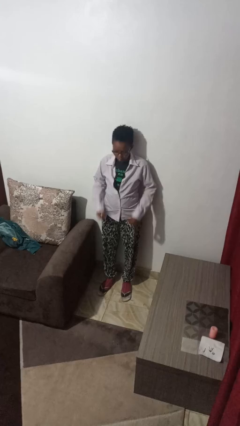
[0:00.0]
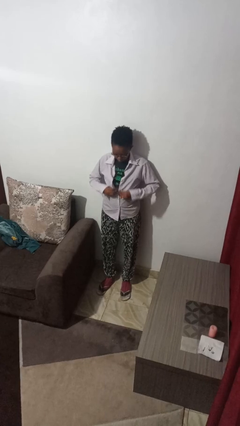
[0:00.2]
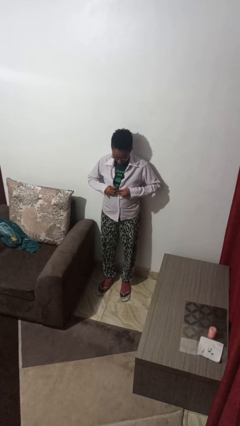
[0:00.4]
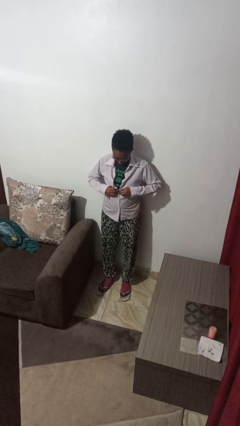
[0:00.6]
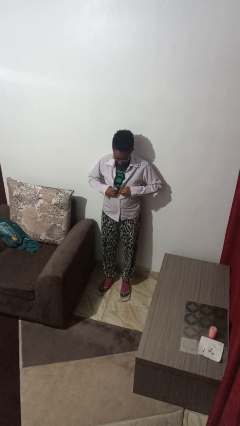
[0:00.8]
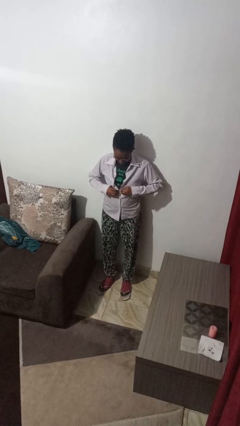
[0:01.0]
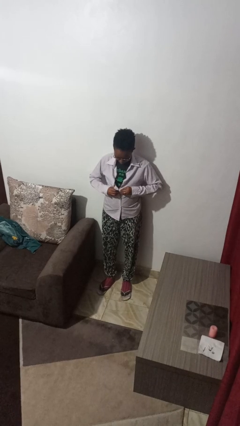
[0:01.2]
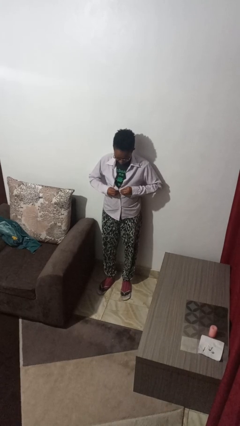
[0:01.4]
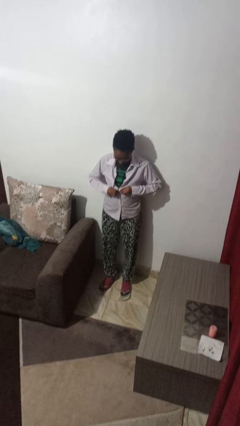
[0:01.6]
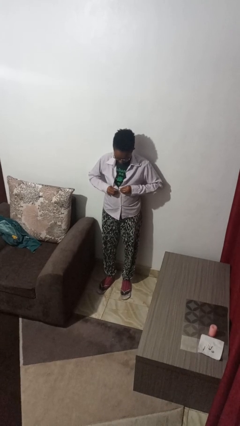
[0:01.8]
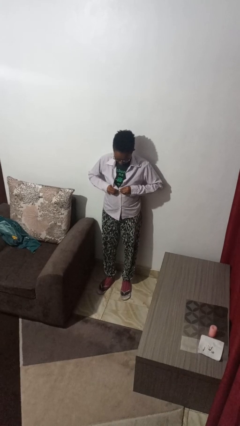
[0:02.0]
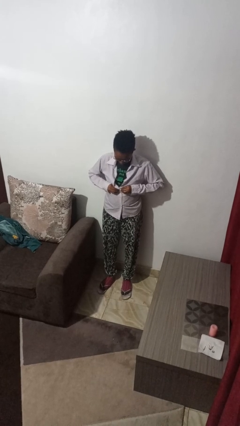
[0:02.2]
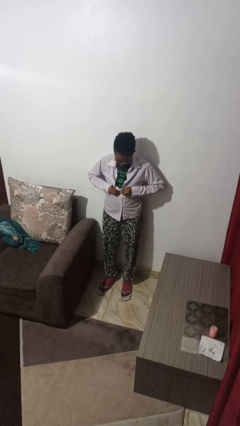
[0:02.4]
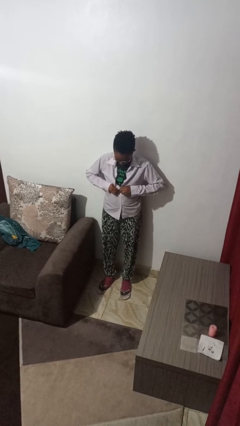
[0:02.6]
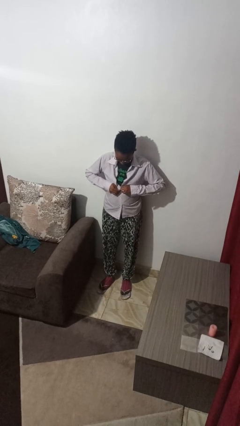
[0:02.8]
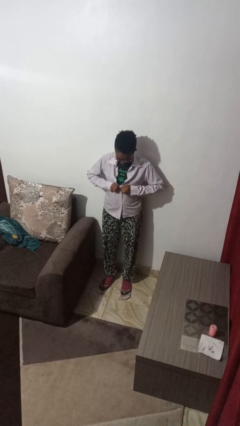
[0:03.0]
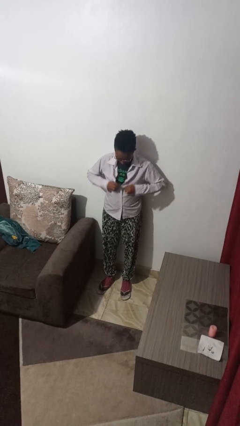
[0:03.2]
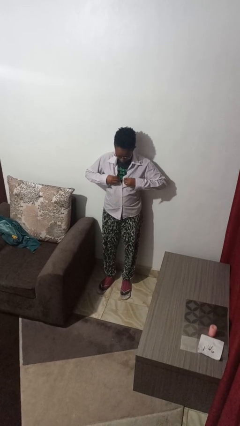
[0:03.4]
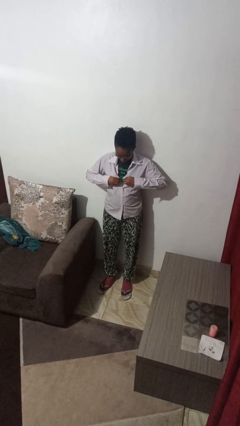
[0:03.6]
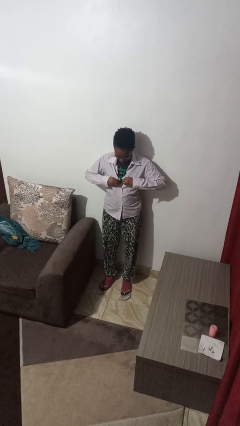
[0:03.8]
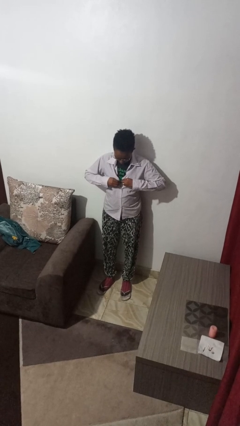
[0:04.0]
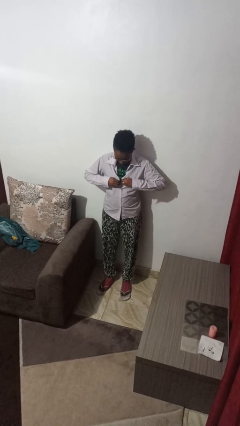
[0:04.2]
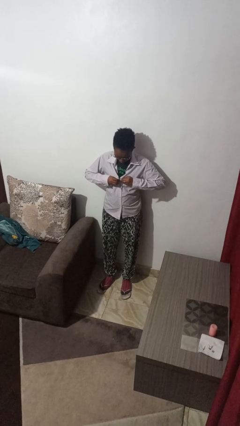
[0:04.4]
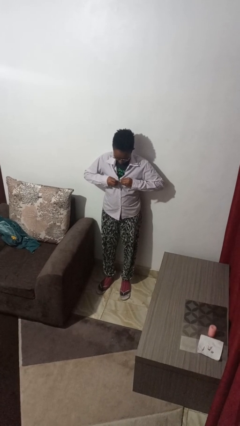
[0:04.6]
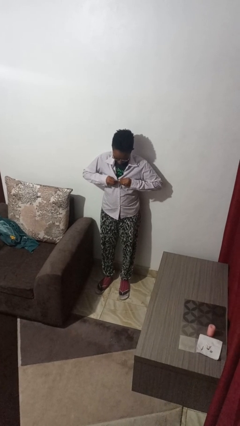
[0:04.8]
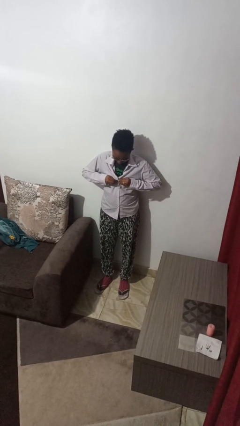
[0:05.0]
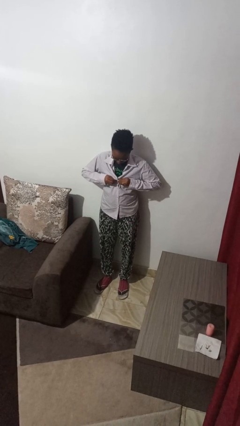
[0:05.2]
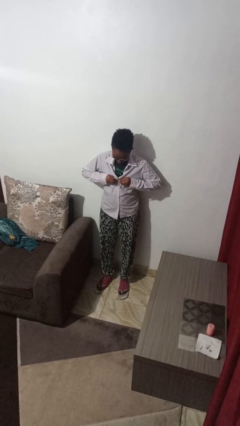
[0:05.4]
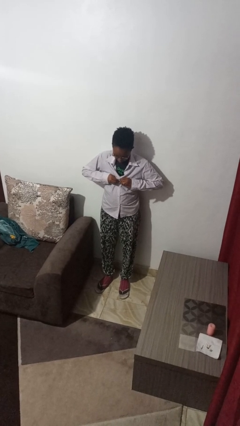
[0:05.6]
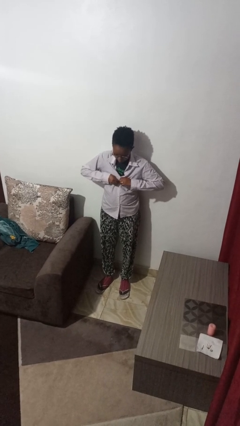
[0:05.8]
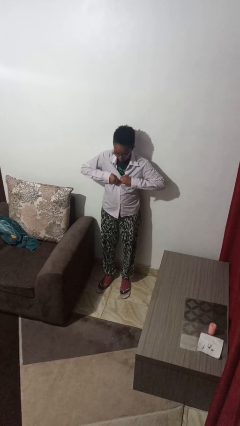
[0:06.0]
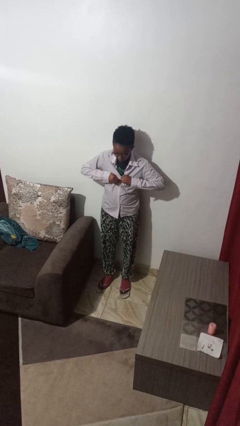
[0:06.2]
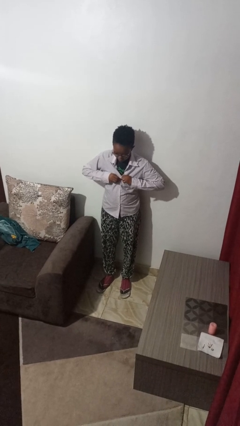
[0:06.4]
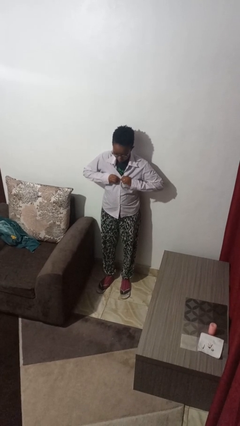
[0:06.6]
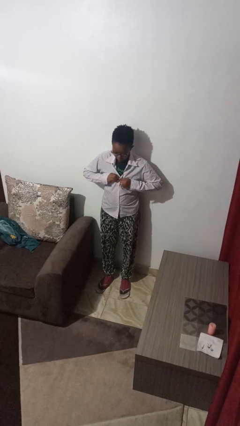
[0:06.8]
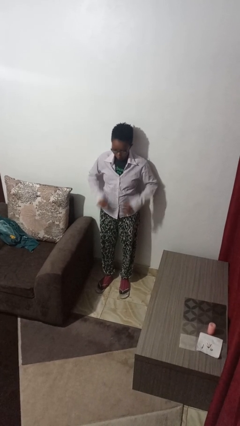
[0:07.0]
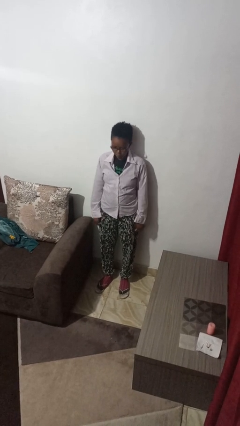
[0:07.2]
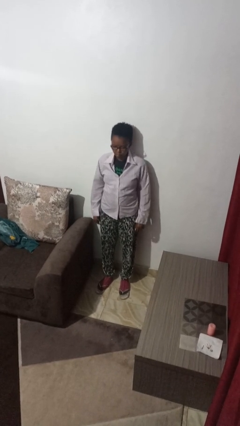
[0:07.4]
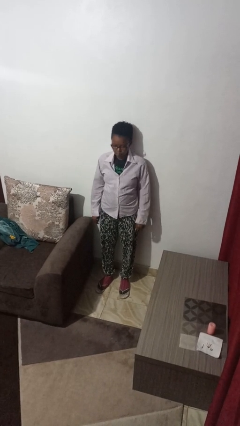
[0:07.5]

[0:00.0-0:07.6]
person buttons shirt

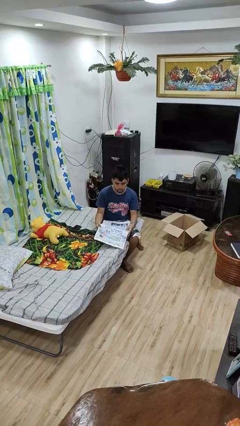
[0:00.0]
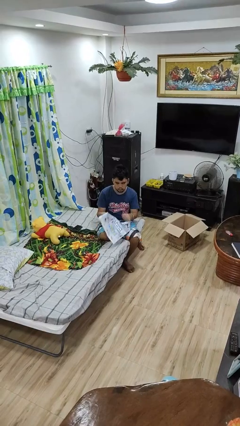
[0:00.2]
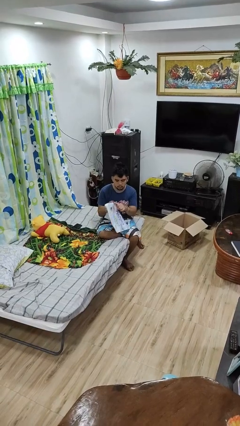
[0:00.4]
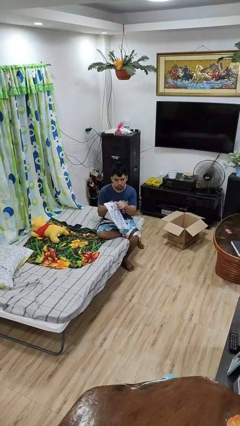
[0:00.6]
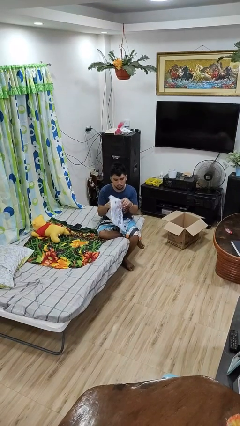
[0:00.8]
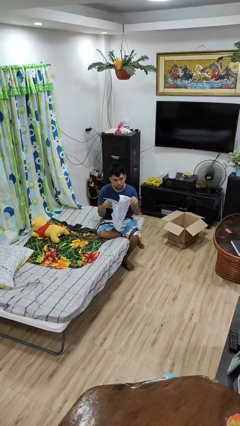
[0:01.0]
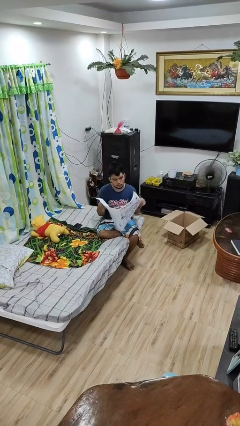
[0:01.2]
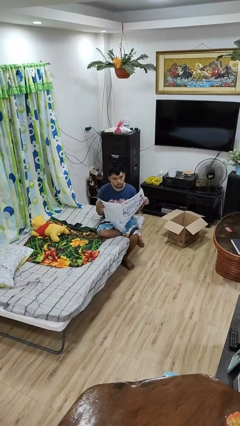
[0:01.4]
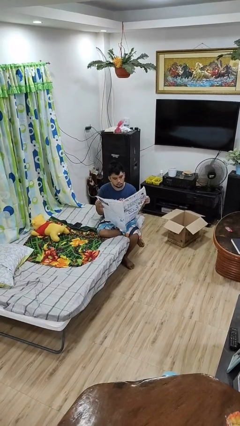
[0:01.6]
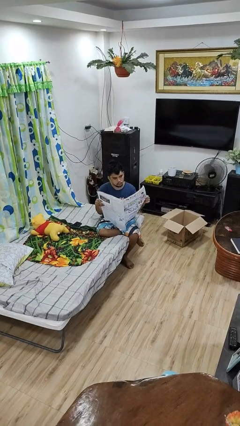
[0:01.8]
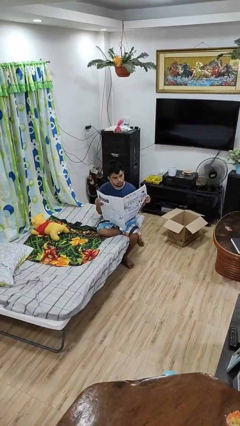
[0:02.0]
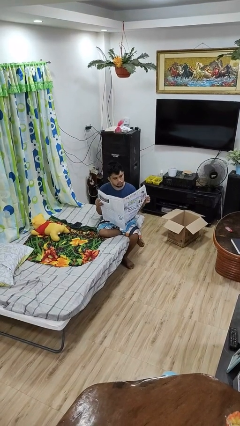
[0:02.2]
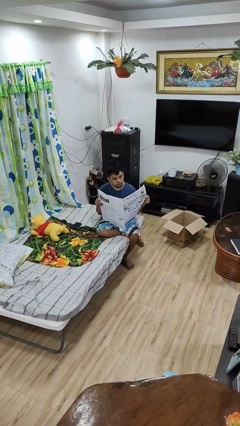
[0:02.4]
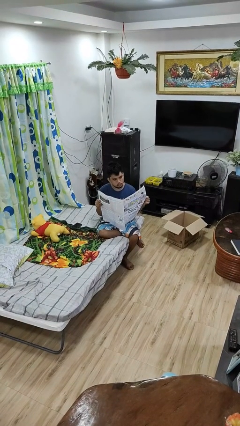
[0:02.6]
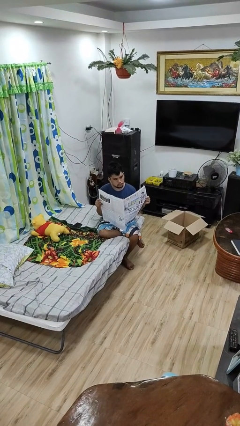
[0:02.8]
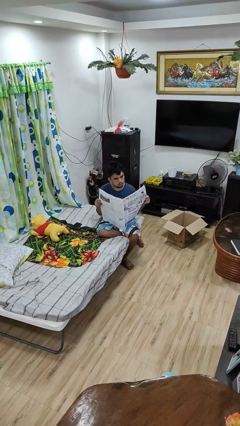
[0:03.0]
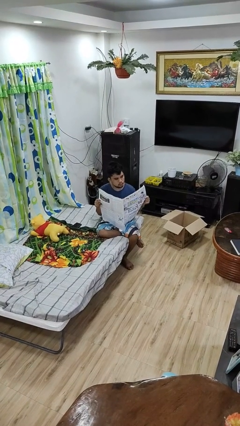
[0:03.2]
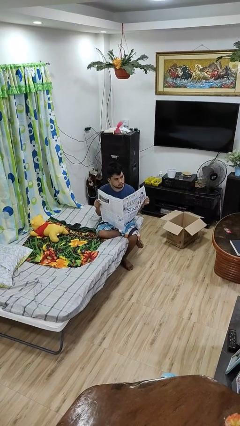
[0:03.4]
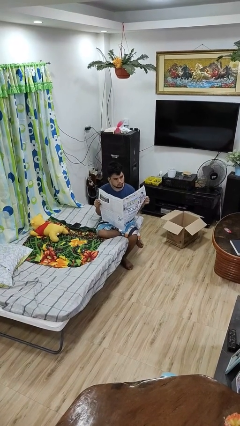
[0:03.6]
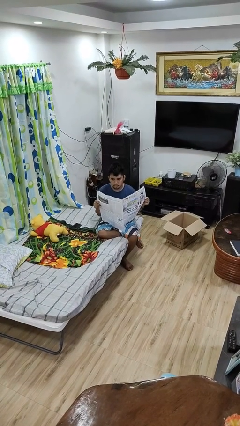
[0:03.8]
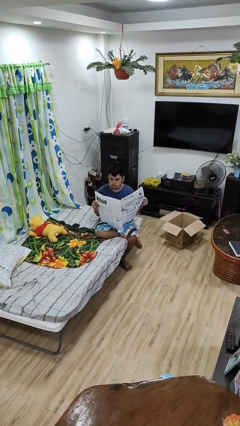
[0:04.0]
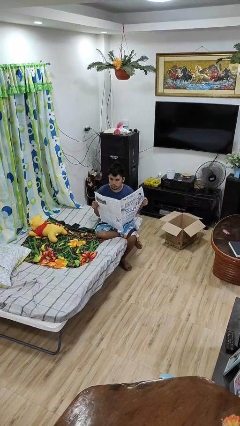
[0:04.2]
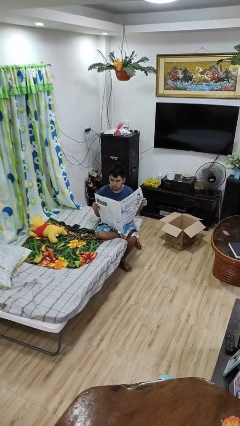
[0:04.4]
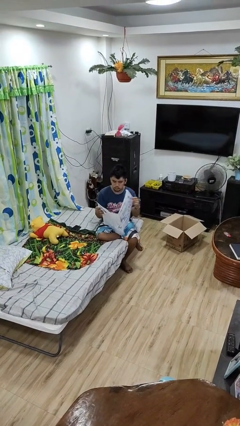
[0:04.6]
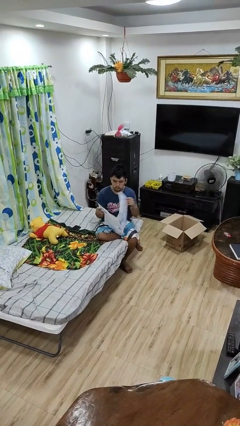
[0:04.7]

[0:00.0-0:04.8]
person reads newspaper

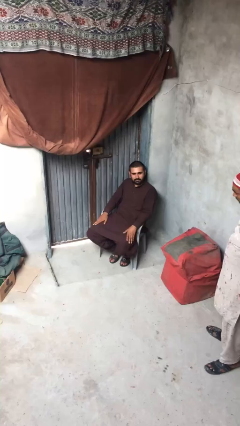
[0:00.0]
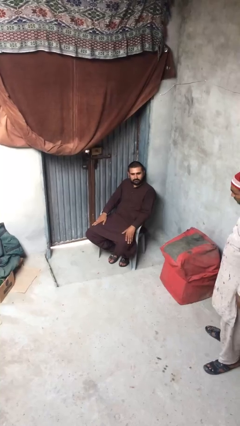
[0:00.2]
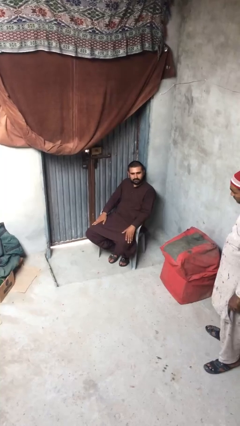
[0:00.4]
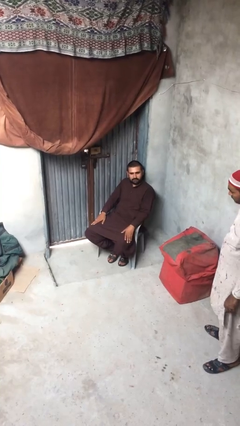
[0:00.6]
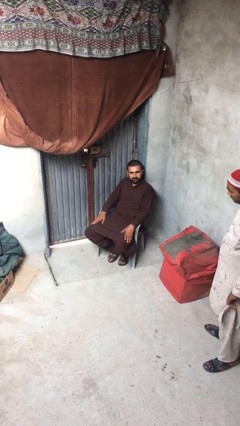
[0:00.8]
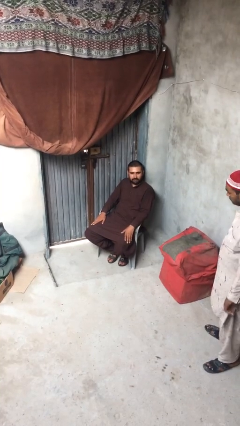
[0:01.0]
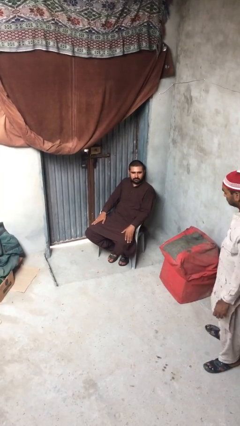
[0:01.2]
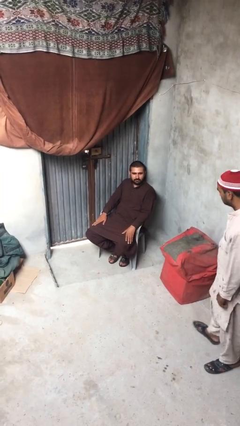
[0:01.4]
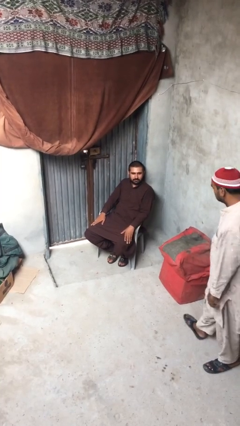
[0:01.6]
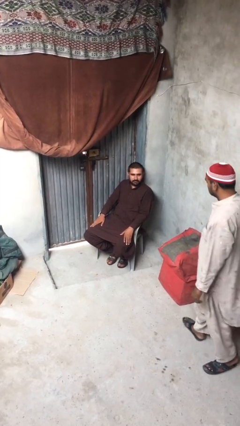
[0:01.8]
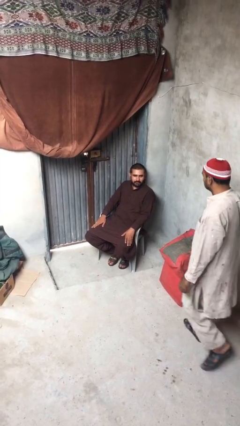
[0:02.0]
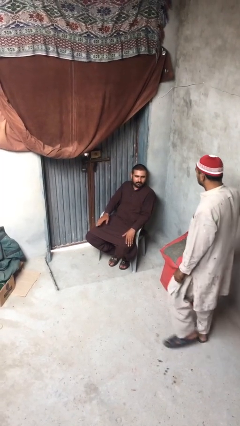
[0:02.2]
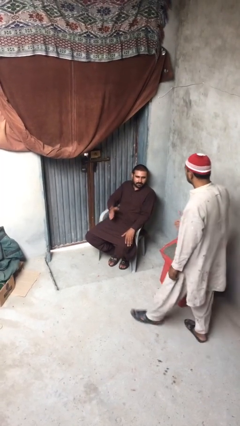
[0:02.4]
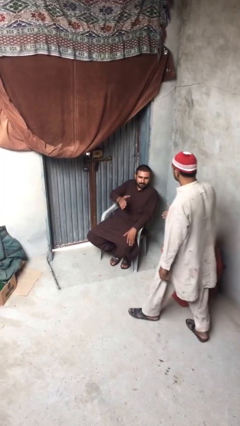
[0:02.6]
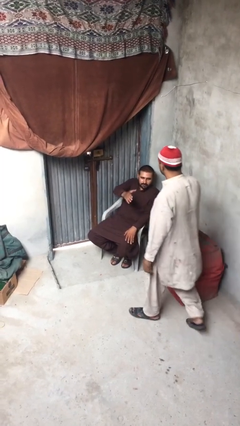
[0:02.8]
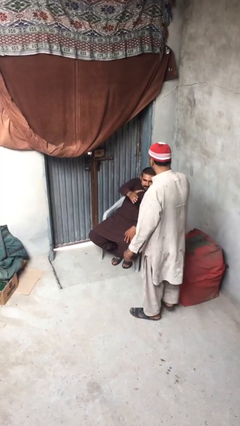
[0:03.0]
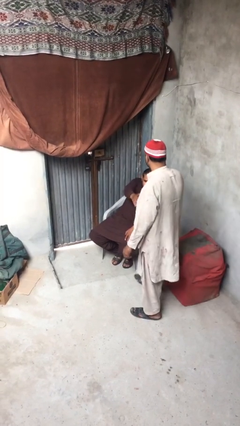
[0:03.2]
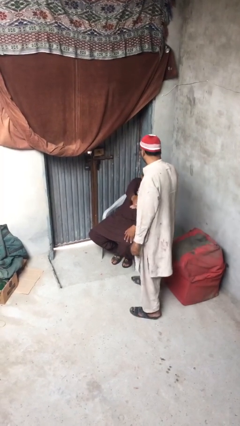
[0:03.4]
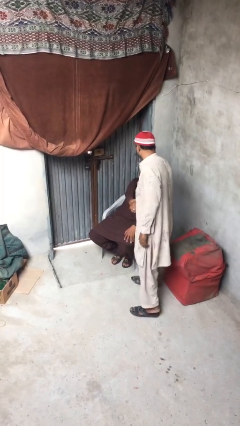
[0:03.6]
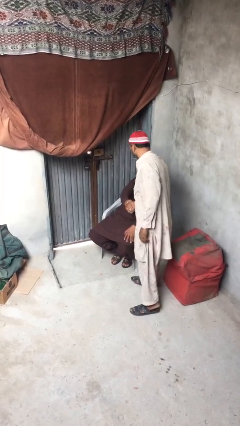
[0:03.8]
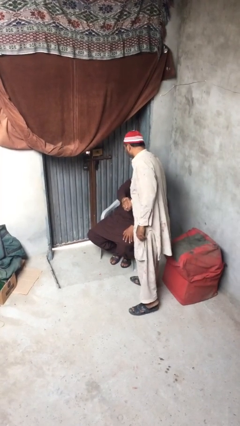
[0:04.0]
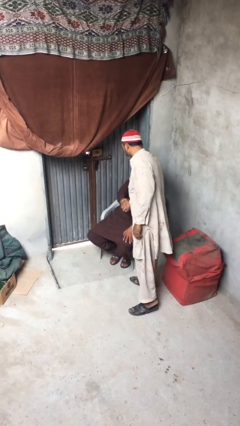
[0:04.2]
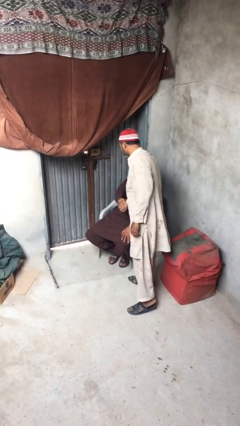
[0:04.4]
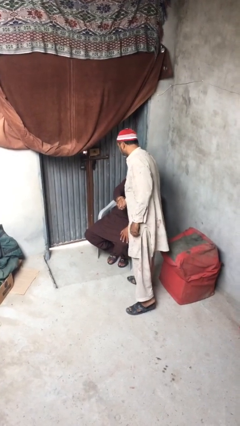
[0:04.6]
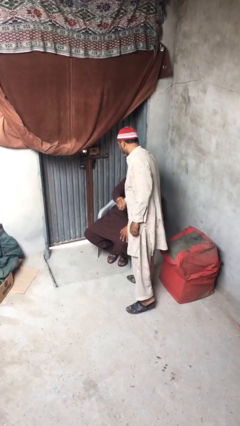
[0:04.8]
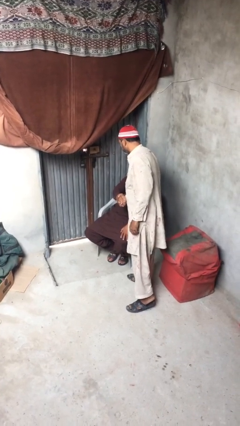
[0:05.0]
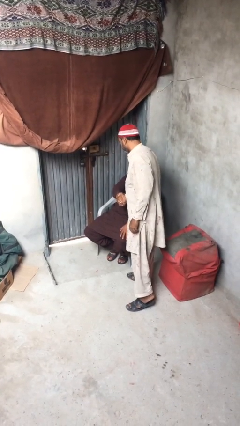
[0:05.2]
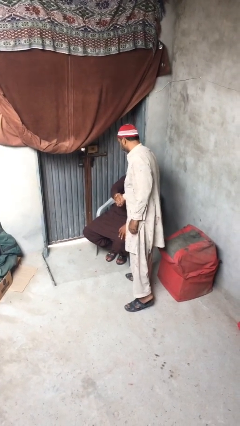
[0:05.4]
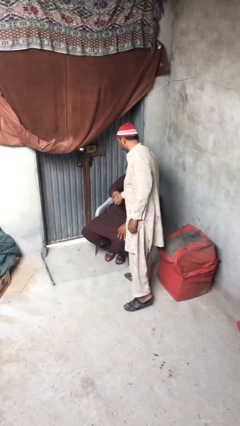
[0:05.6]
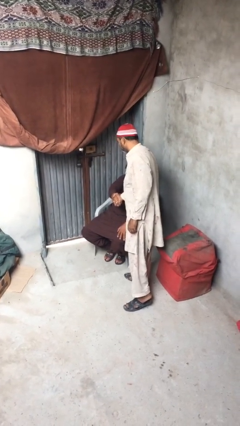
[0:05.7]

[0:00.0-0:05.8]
person shakes hand
